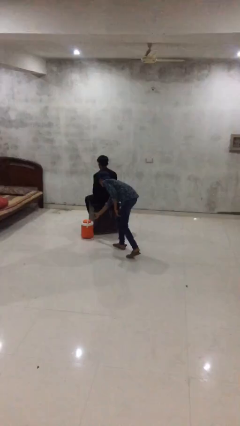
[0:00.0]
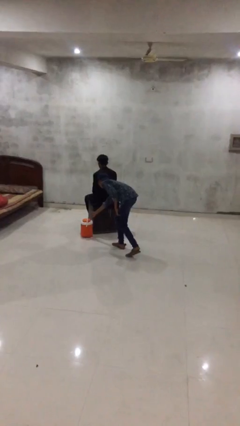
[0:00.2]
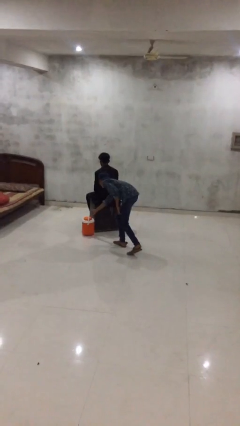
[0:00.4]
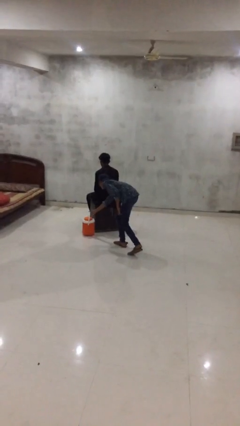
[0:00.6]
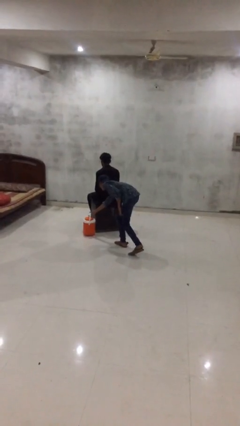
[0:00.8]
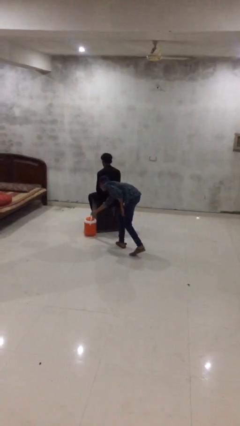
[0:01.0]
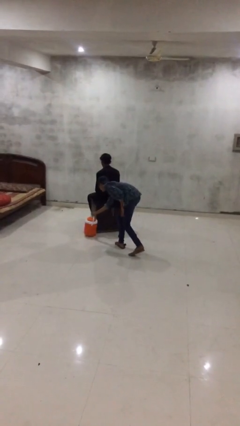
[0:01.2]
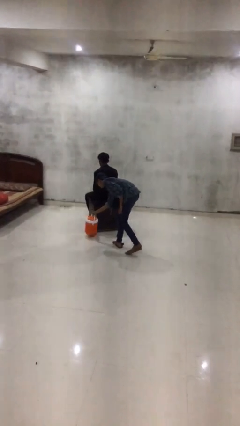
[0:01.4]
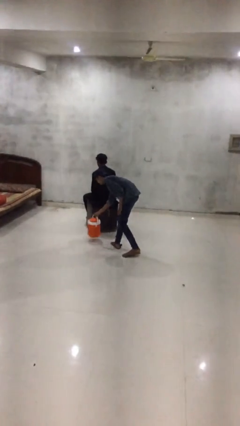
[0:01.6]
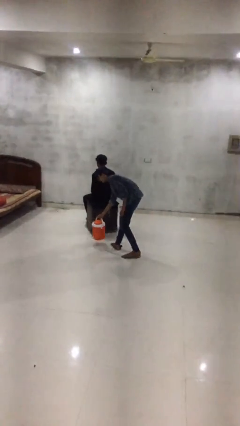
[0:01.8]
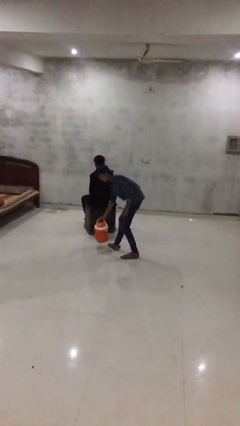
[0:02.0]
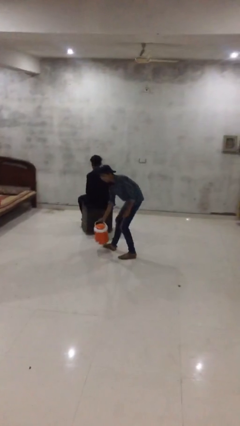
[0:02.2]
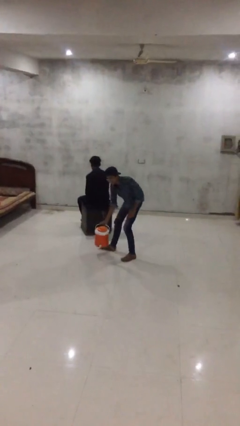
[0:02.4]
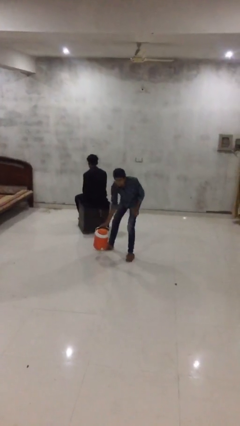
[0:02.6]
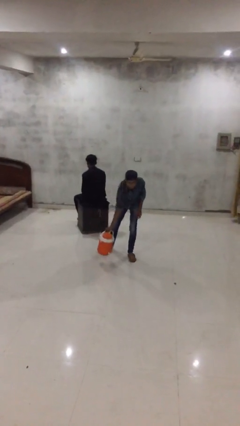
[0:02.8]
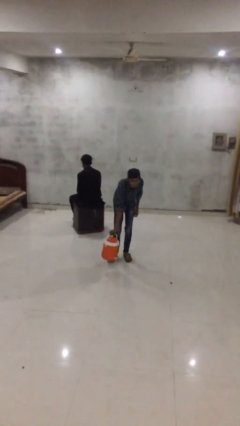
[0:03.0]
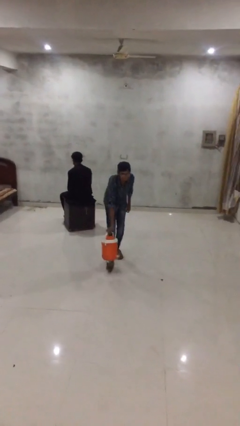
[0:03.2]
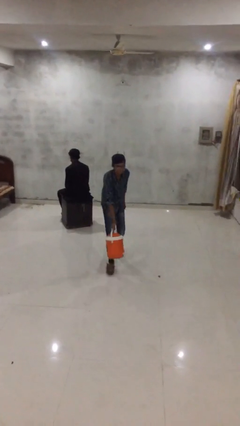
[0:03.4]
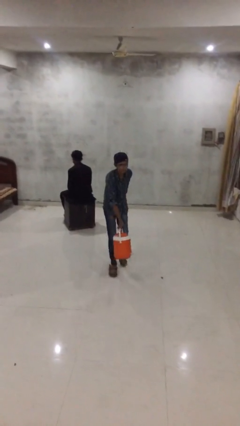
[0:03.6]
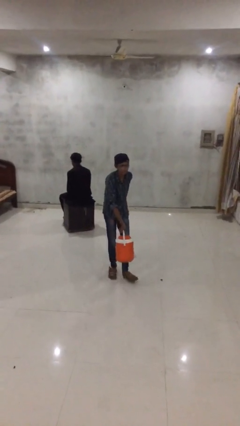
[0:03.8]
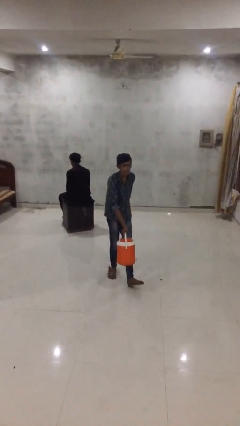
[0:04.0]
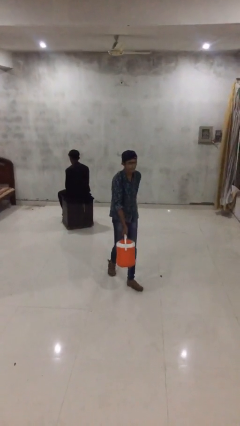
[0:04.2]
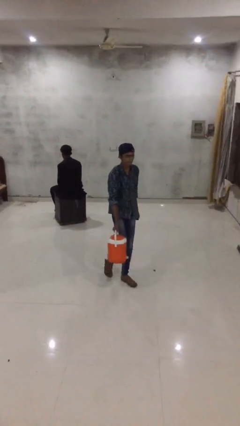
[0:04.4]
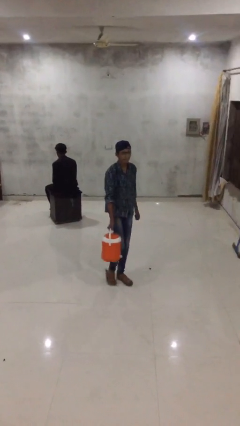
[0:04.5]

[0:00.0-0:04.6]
person steals object from person

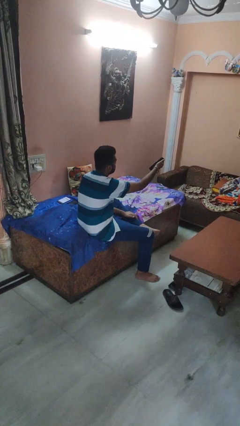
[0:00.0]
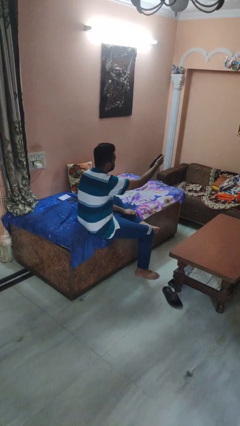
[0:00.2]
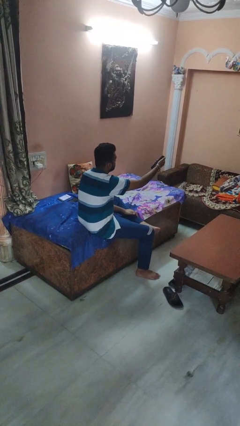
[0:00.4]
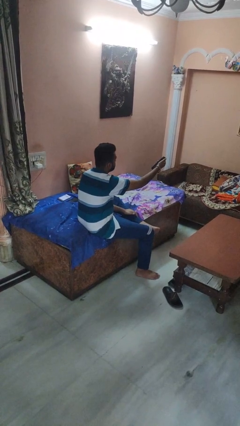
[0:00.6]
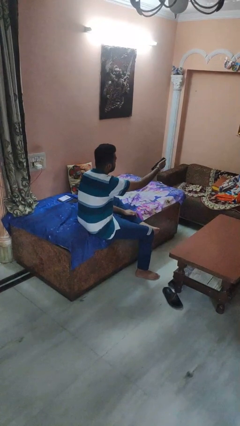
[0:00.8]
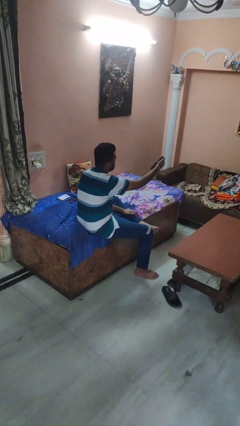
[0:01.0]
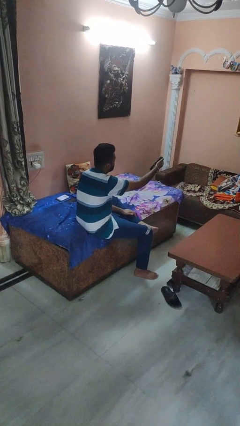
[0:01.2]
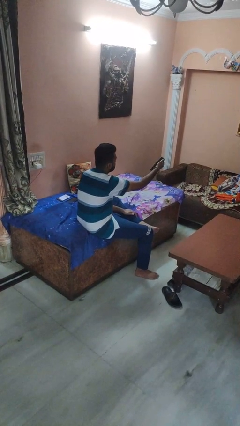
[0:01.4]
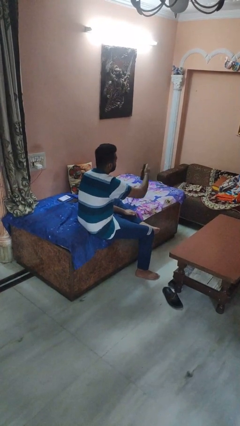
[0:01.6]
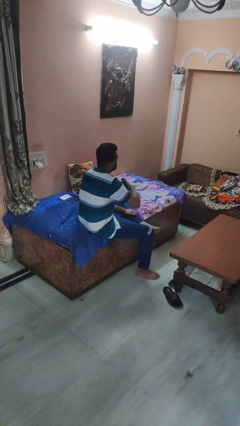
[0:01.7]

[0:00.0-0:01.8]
person uses television remote

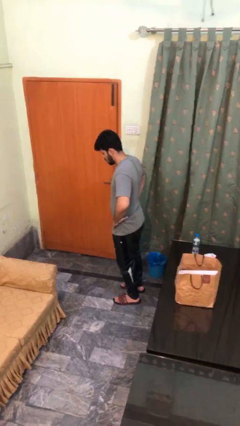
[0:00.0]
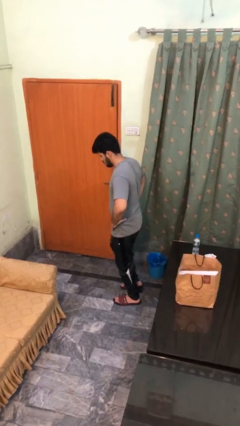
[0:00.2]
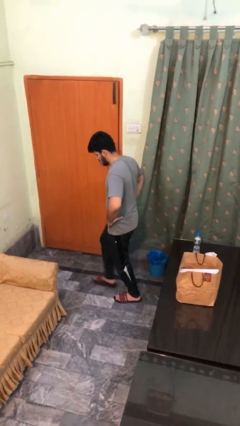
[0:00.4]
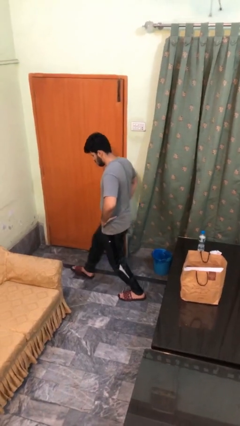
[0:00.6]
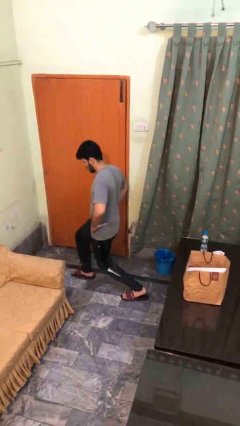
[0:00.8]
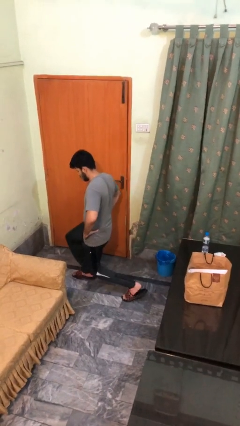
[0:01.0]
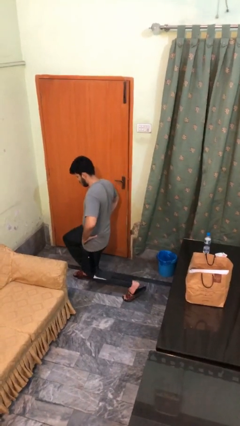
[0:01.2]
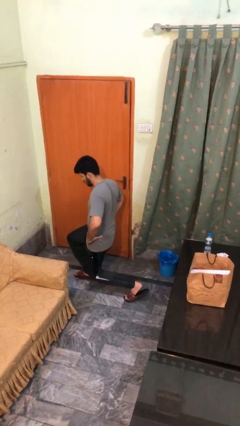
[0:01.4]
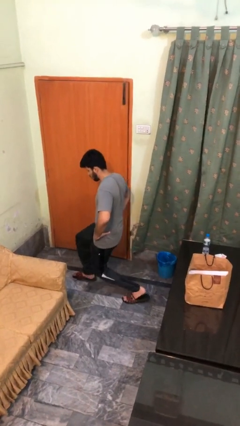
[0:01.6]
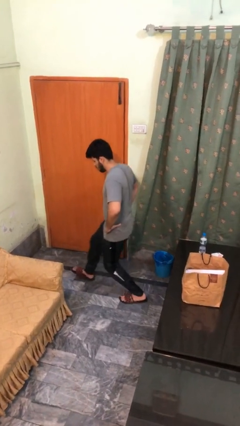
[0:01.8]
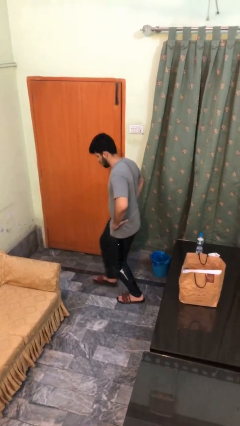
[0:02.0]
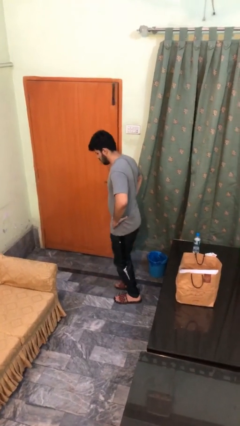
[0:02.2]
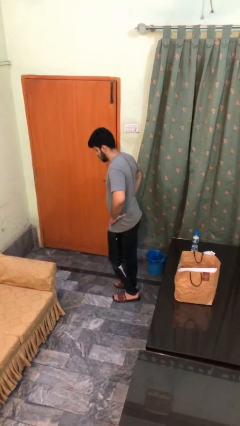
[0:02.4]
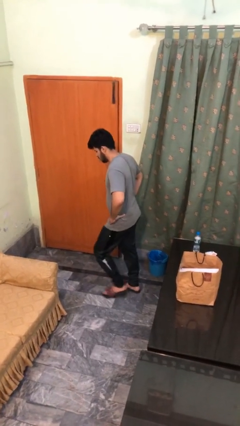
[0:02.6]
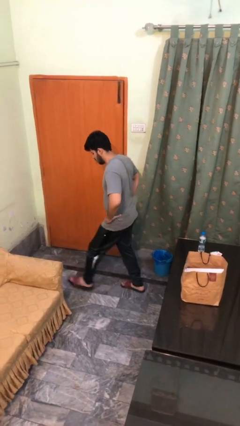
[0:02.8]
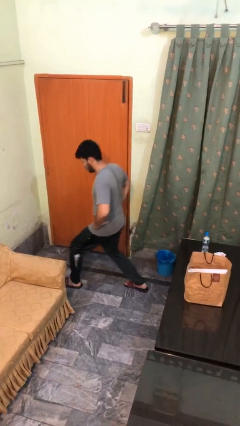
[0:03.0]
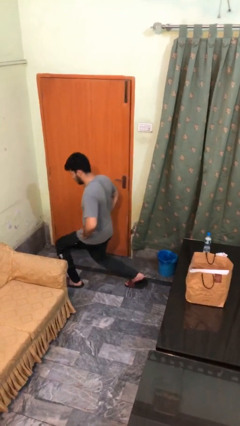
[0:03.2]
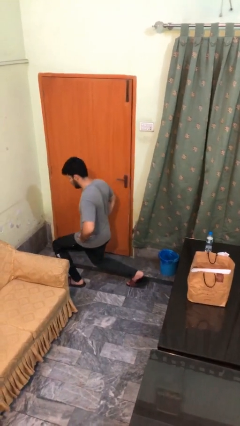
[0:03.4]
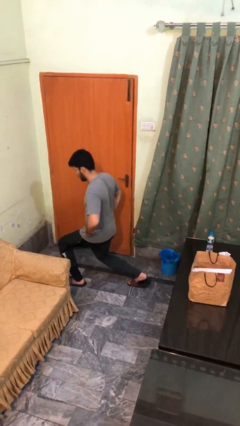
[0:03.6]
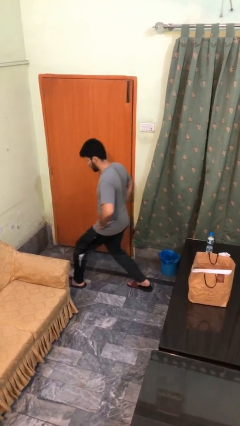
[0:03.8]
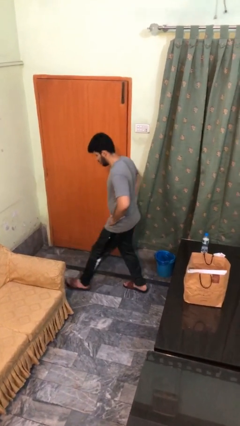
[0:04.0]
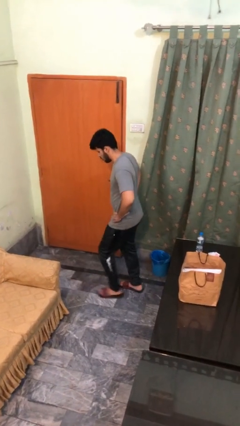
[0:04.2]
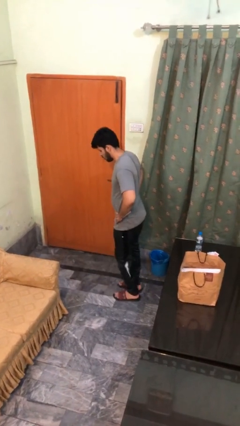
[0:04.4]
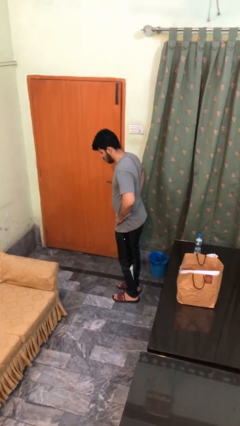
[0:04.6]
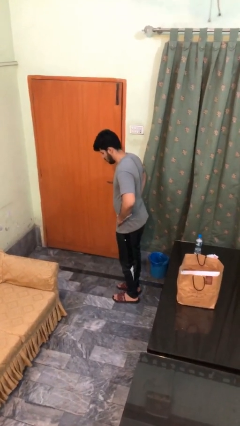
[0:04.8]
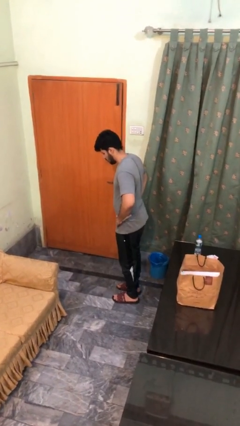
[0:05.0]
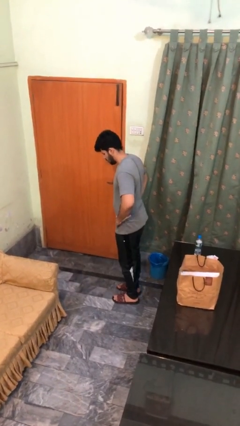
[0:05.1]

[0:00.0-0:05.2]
person exercises with lunges

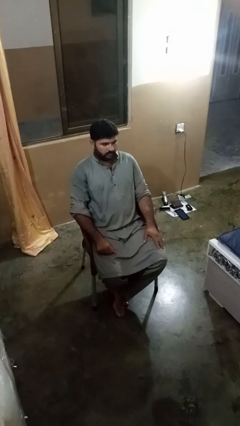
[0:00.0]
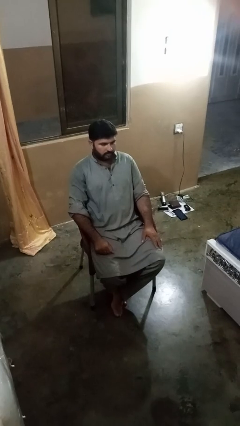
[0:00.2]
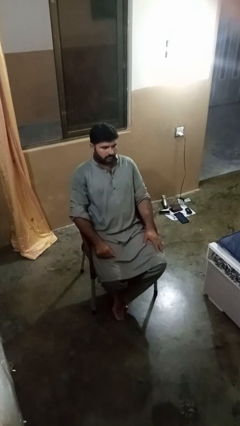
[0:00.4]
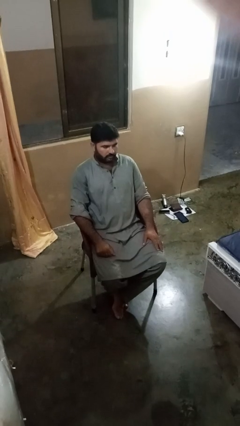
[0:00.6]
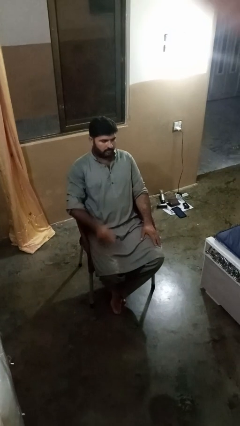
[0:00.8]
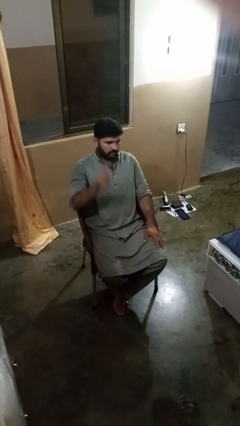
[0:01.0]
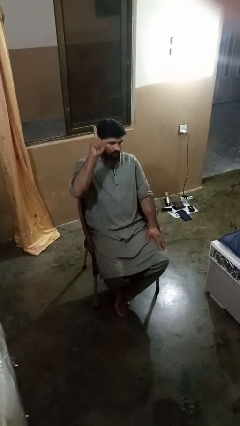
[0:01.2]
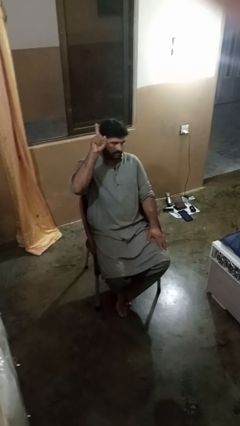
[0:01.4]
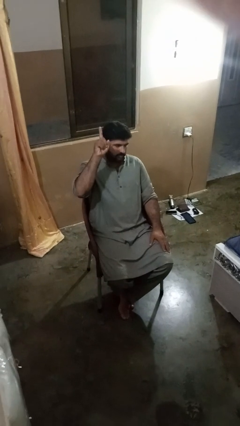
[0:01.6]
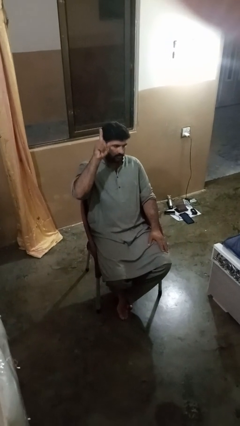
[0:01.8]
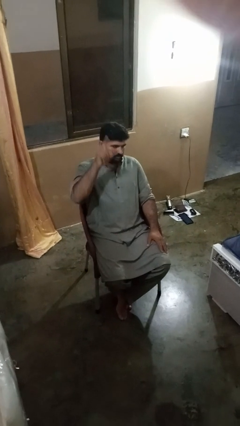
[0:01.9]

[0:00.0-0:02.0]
person gestures number one

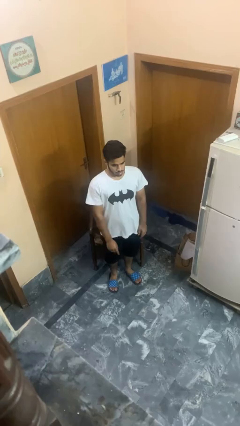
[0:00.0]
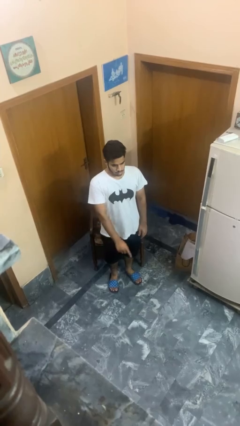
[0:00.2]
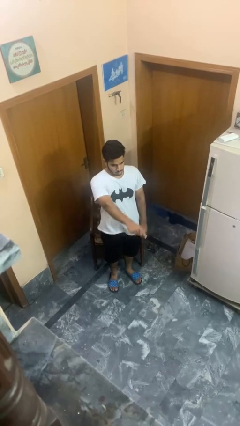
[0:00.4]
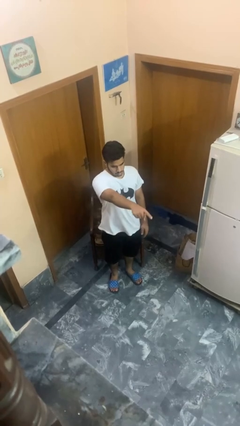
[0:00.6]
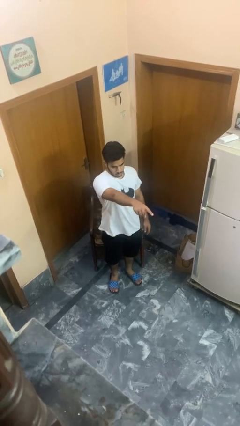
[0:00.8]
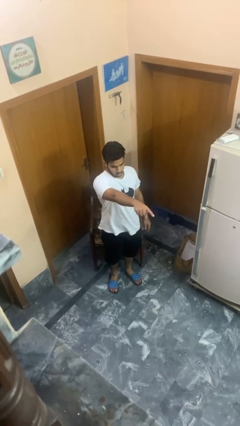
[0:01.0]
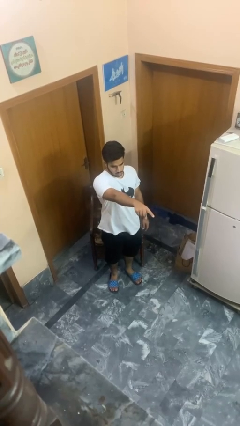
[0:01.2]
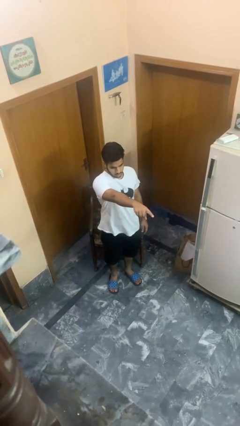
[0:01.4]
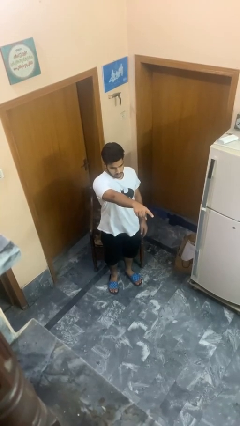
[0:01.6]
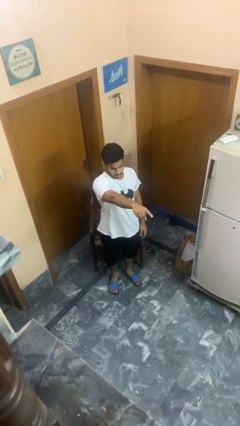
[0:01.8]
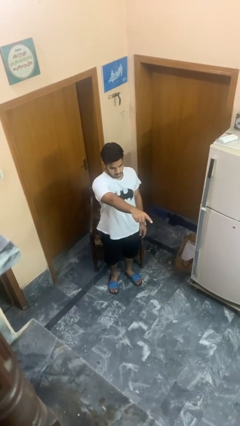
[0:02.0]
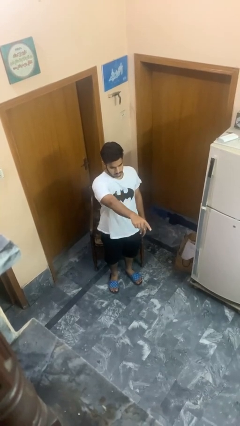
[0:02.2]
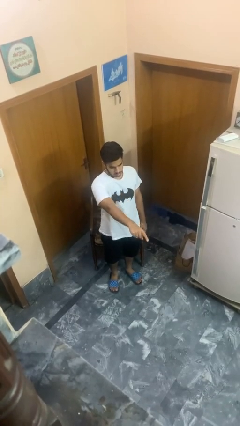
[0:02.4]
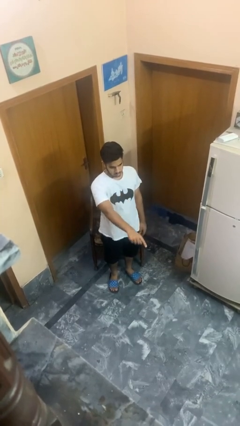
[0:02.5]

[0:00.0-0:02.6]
person points at person

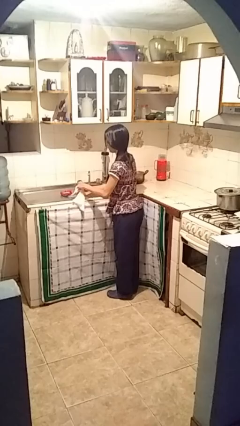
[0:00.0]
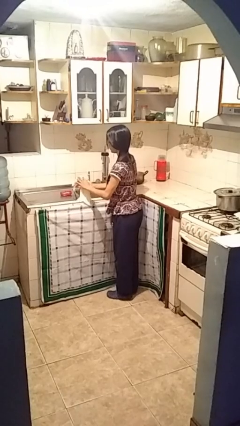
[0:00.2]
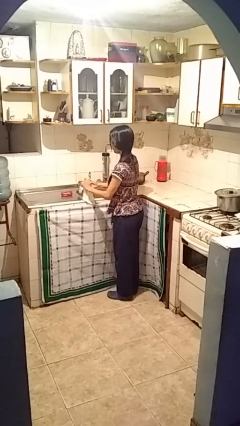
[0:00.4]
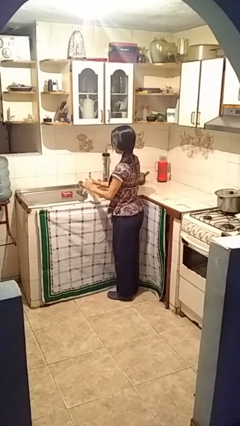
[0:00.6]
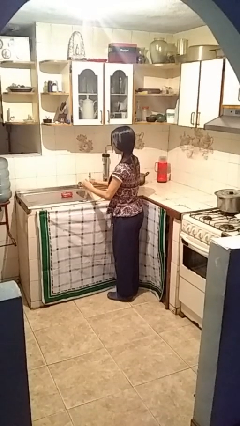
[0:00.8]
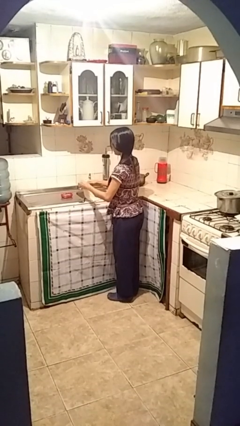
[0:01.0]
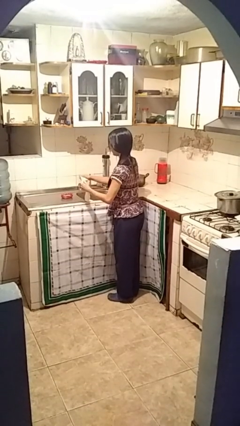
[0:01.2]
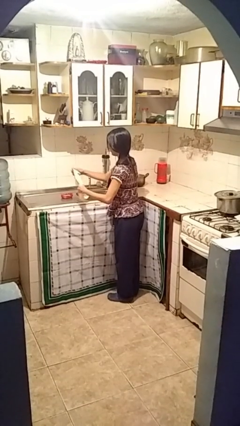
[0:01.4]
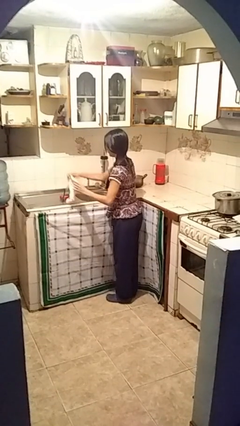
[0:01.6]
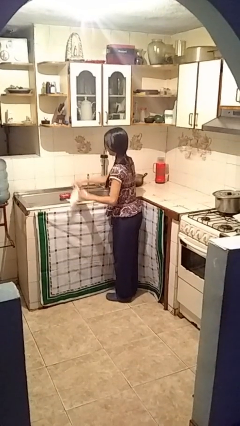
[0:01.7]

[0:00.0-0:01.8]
person dries hands with towel
